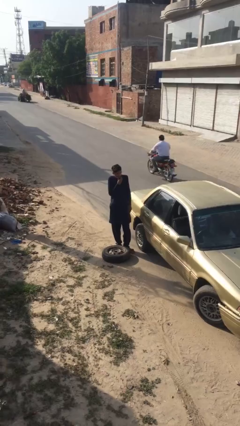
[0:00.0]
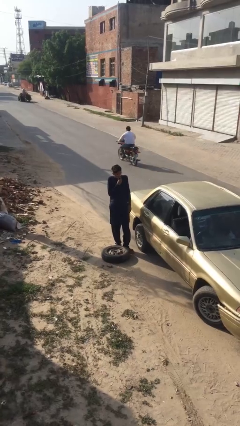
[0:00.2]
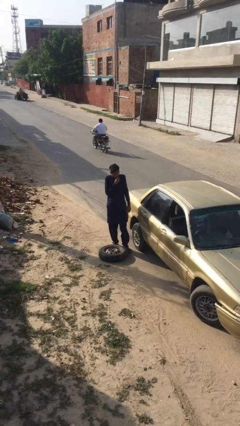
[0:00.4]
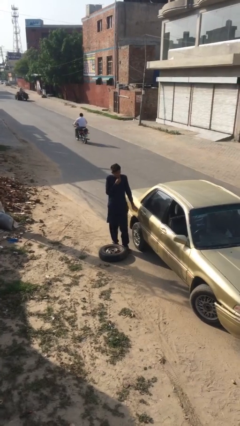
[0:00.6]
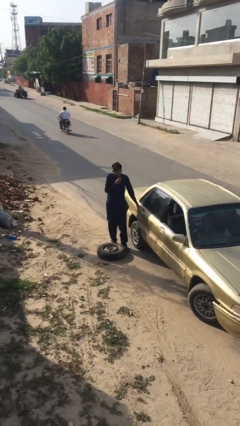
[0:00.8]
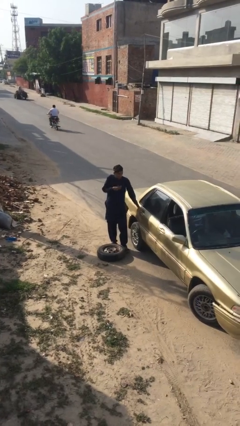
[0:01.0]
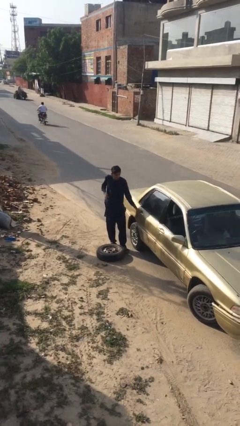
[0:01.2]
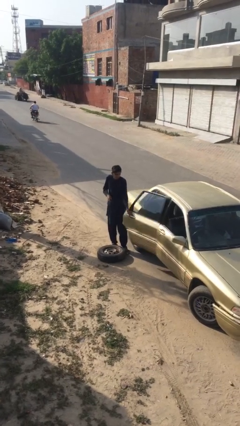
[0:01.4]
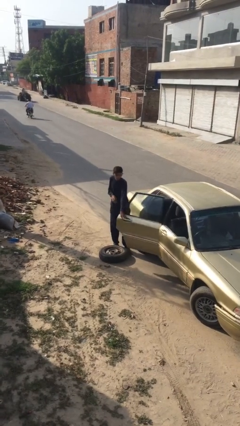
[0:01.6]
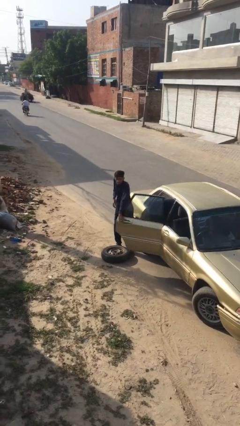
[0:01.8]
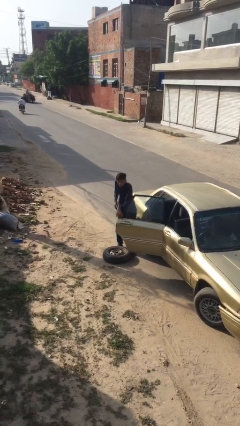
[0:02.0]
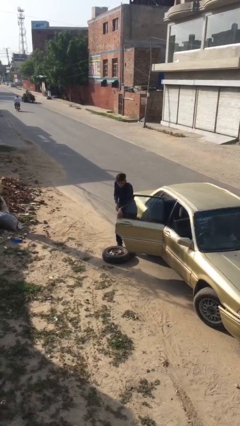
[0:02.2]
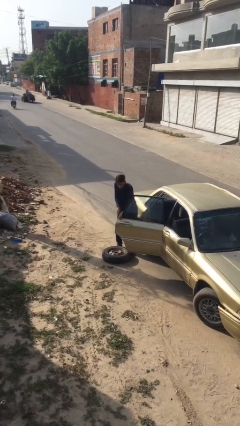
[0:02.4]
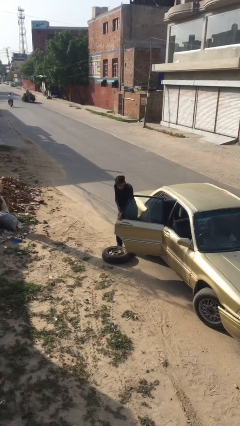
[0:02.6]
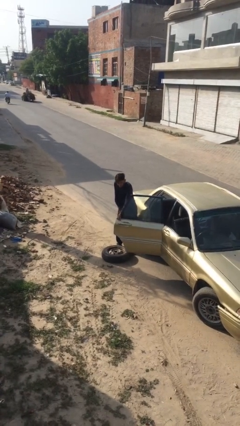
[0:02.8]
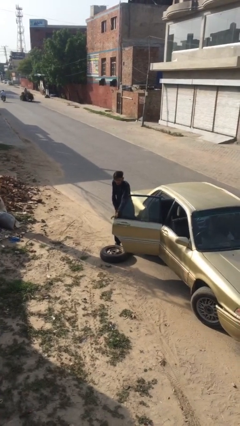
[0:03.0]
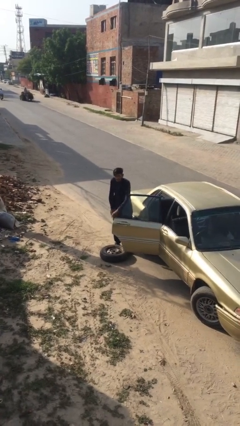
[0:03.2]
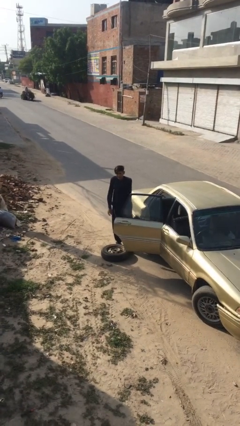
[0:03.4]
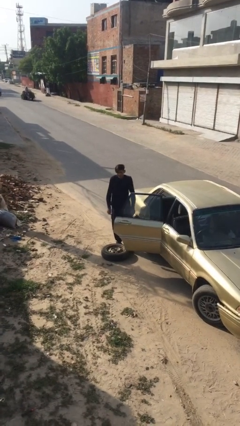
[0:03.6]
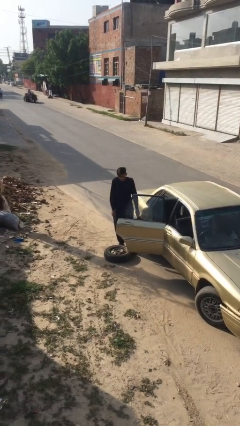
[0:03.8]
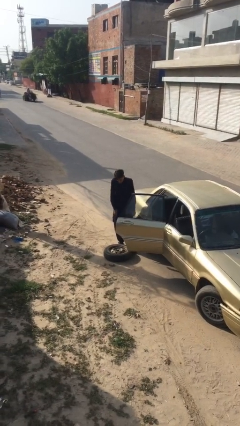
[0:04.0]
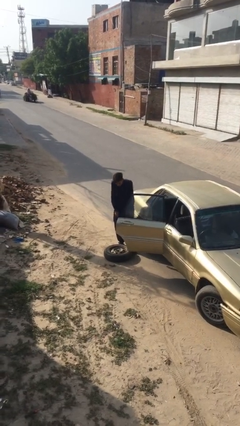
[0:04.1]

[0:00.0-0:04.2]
person opens car door

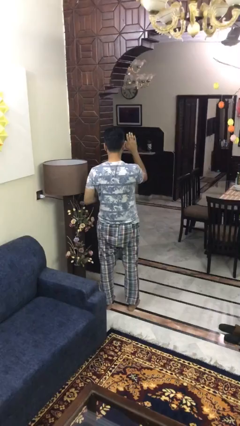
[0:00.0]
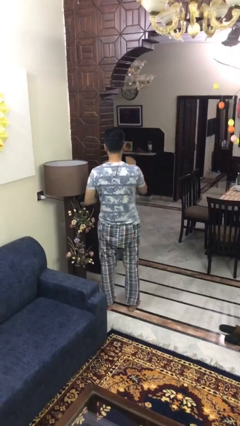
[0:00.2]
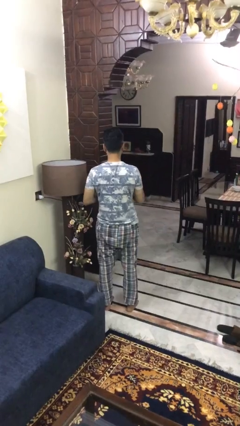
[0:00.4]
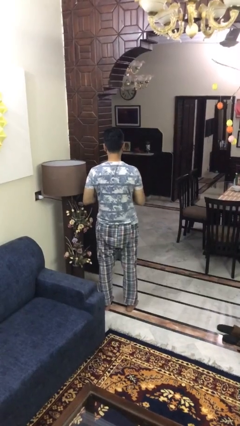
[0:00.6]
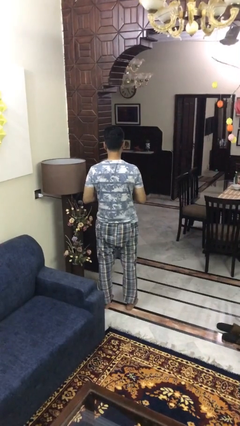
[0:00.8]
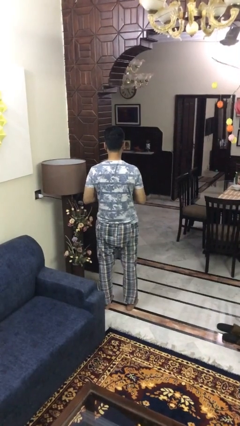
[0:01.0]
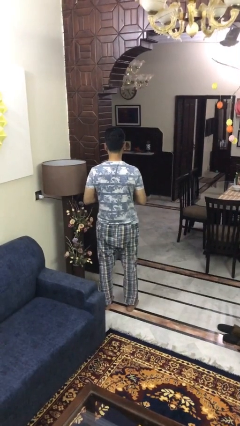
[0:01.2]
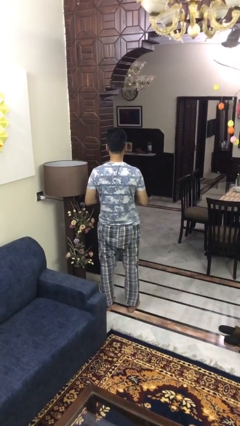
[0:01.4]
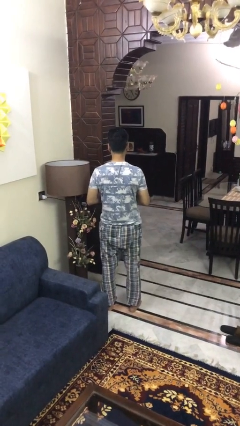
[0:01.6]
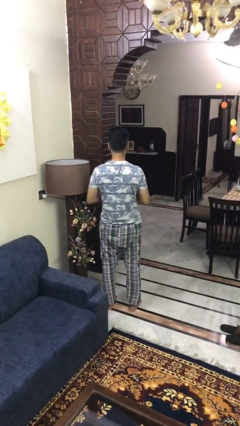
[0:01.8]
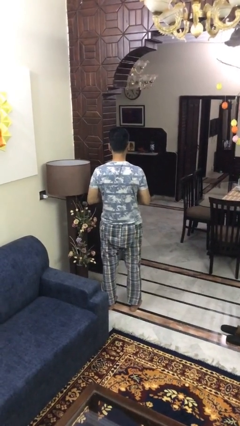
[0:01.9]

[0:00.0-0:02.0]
person gestures lower hand

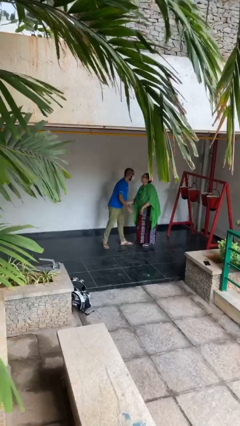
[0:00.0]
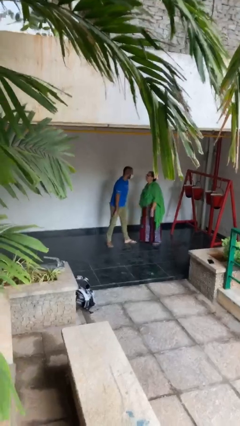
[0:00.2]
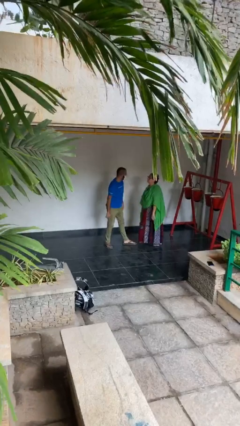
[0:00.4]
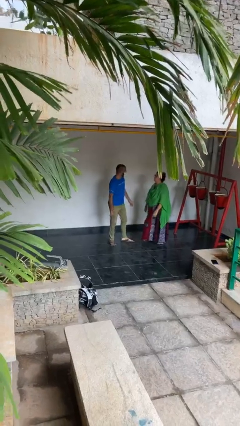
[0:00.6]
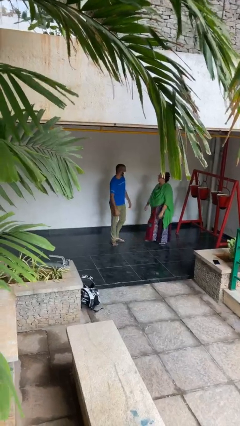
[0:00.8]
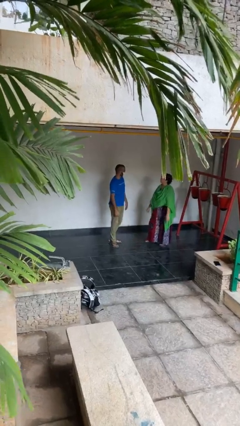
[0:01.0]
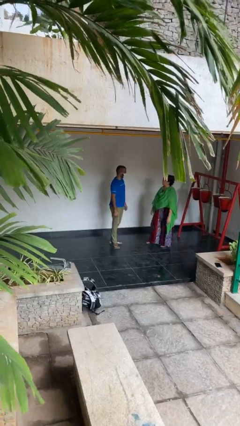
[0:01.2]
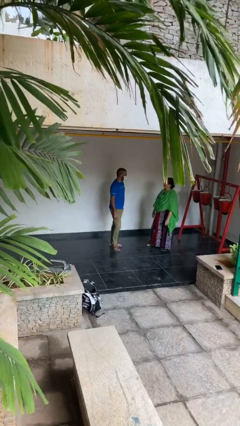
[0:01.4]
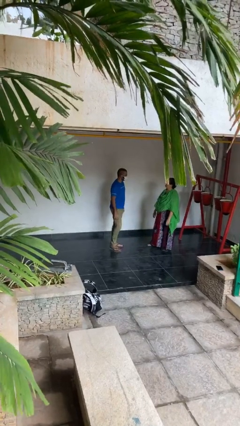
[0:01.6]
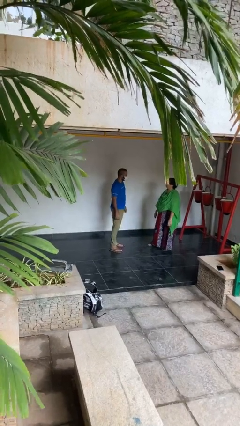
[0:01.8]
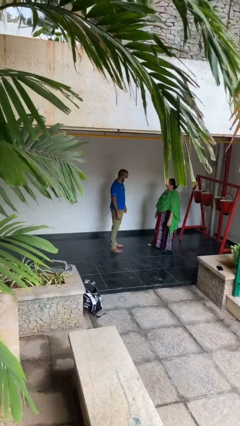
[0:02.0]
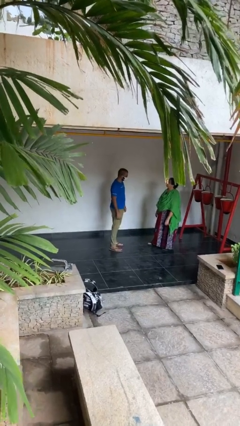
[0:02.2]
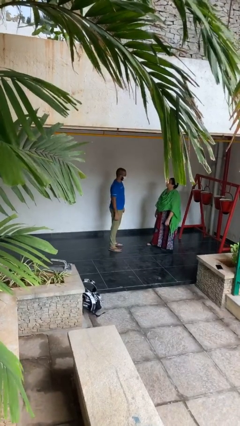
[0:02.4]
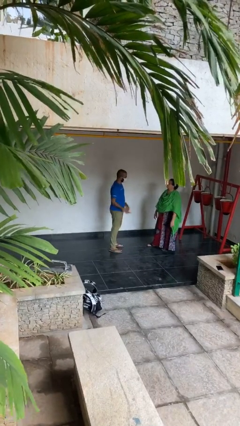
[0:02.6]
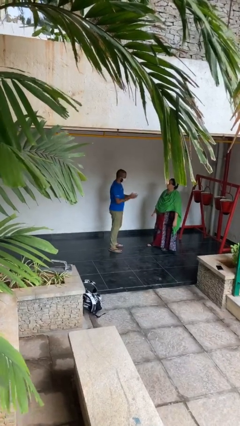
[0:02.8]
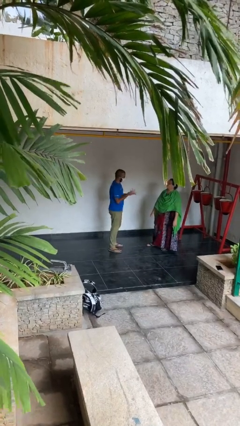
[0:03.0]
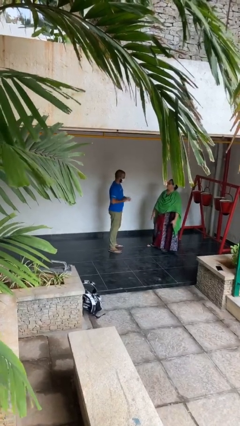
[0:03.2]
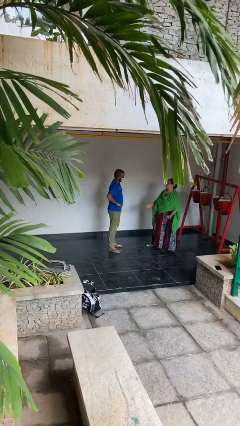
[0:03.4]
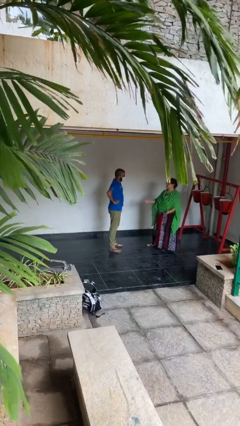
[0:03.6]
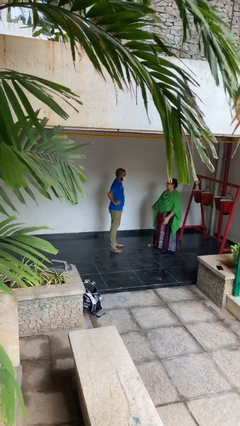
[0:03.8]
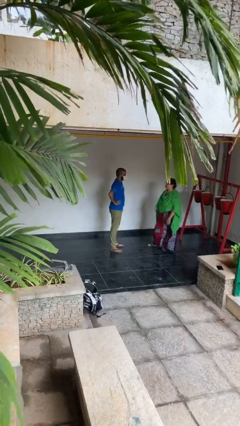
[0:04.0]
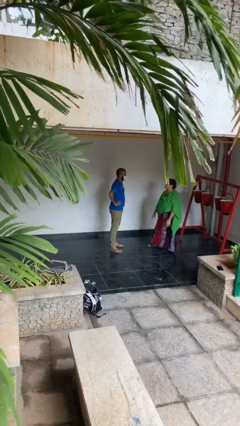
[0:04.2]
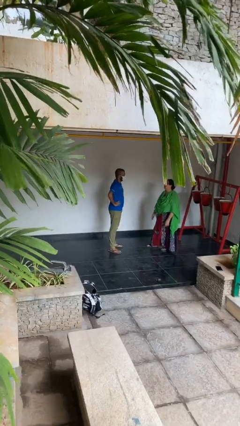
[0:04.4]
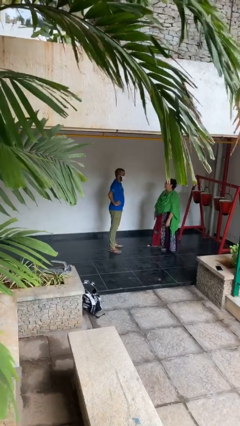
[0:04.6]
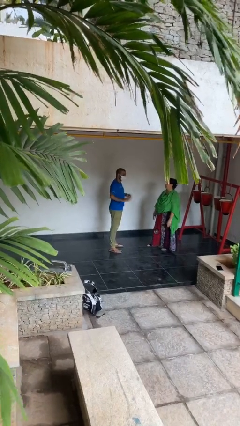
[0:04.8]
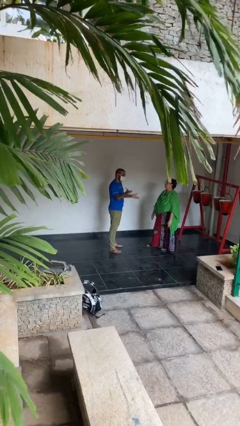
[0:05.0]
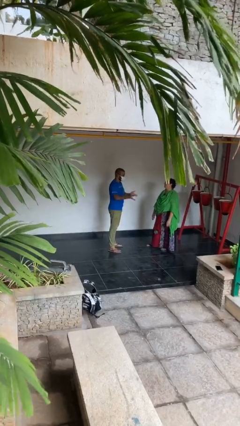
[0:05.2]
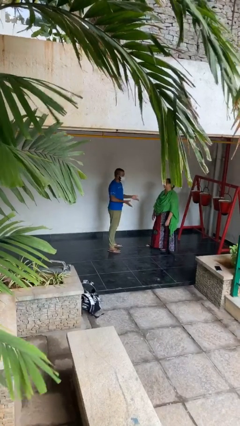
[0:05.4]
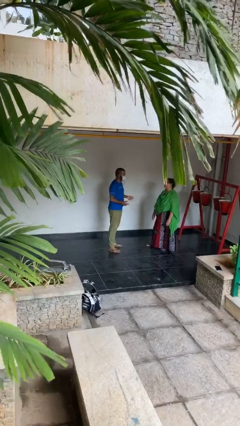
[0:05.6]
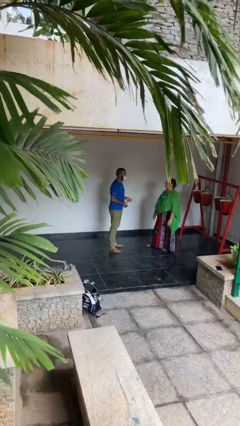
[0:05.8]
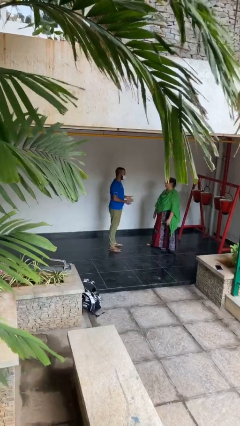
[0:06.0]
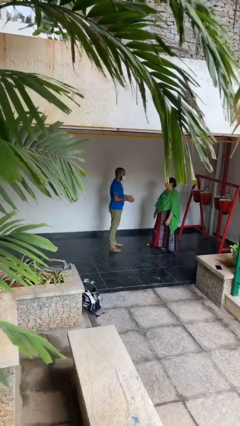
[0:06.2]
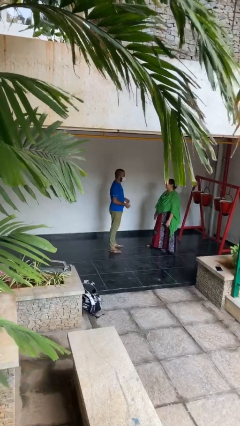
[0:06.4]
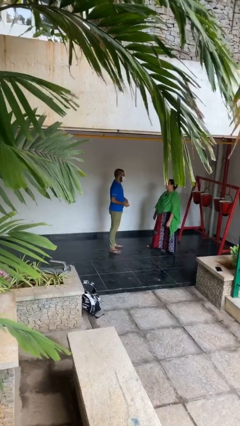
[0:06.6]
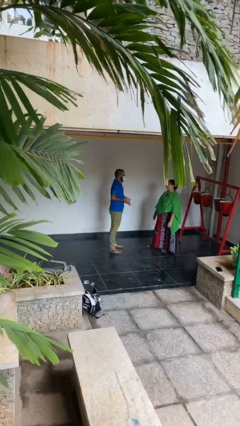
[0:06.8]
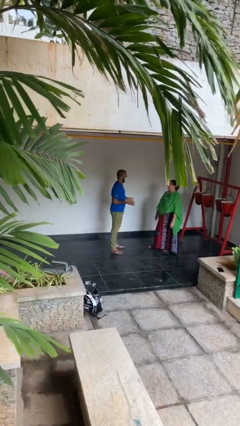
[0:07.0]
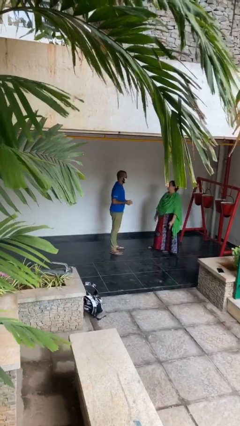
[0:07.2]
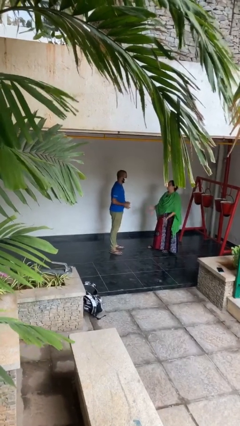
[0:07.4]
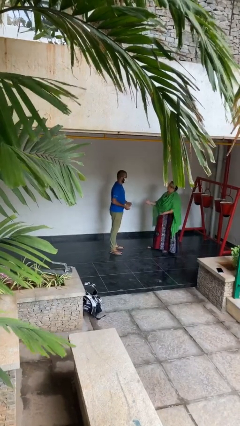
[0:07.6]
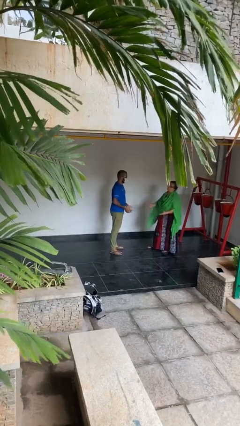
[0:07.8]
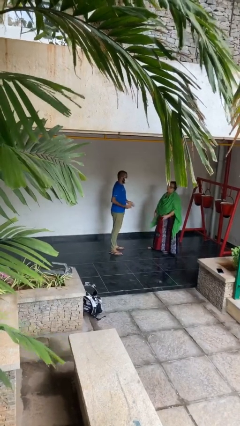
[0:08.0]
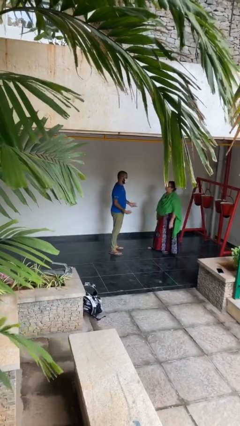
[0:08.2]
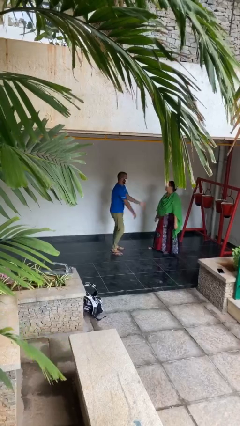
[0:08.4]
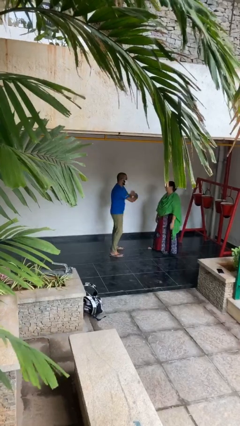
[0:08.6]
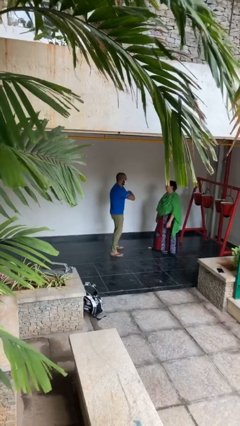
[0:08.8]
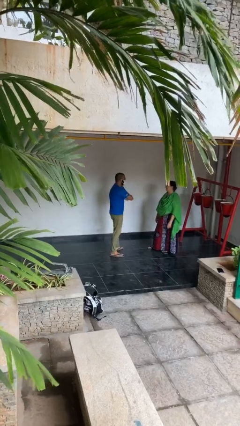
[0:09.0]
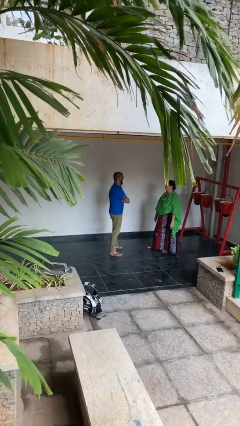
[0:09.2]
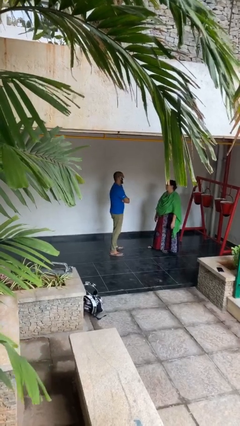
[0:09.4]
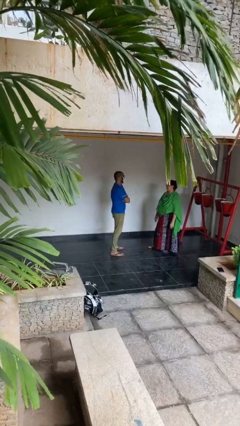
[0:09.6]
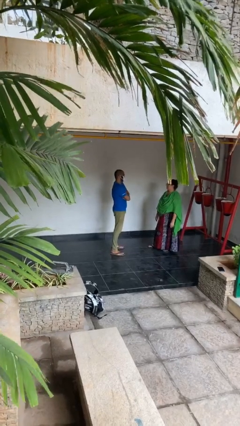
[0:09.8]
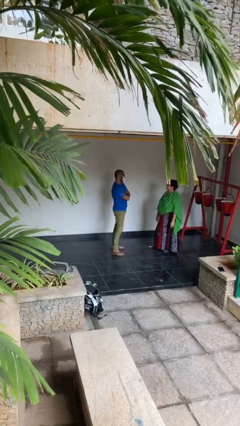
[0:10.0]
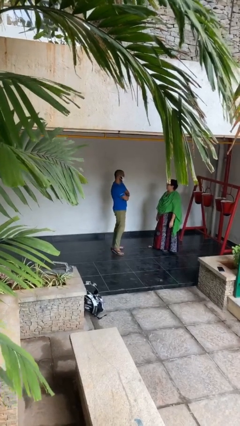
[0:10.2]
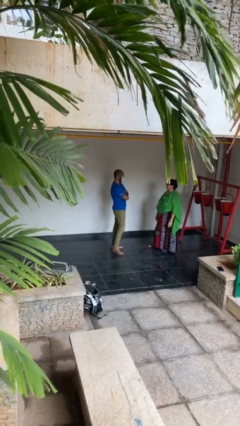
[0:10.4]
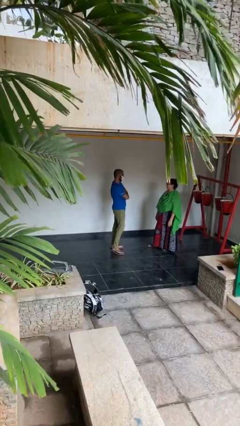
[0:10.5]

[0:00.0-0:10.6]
person talks to person

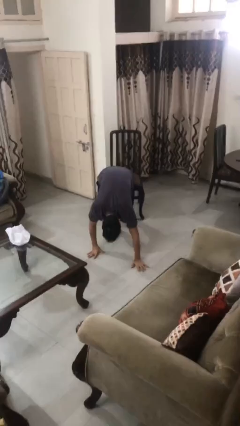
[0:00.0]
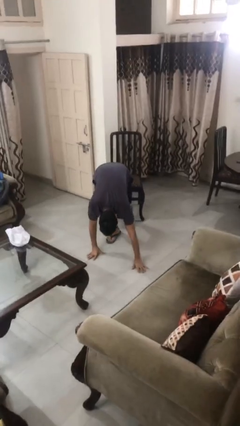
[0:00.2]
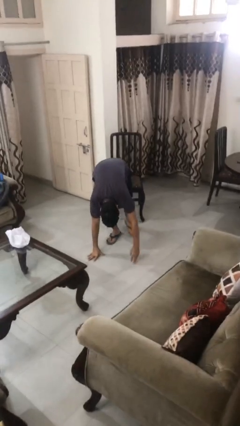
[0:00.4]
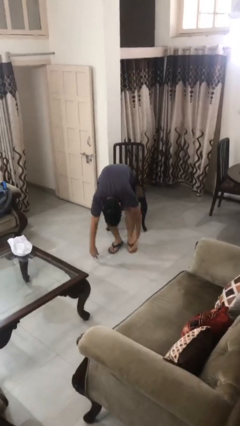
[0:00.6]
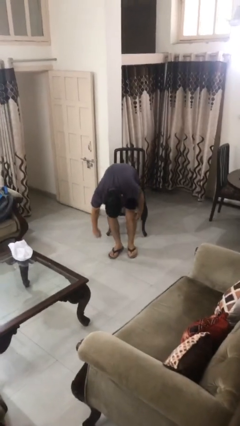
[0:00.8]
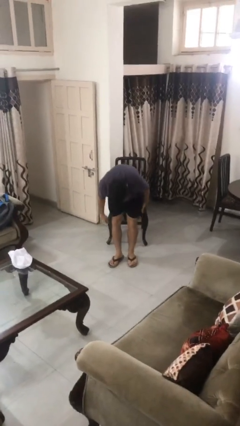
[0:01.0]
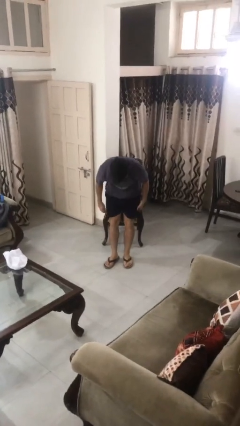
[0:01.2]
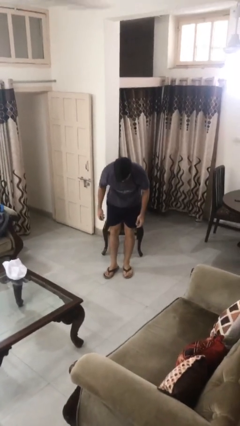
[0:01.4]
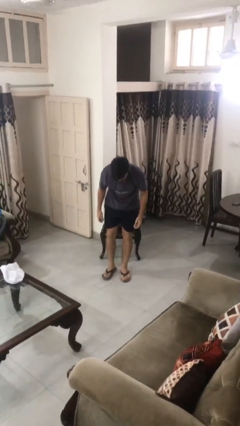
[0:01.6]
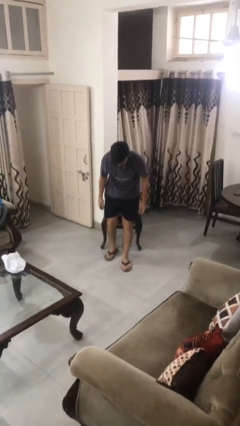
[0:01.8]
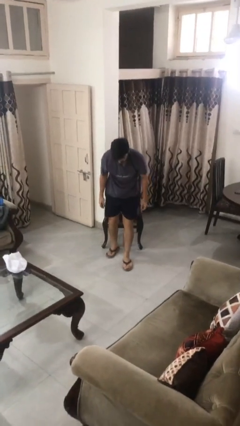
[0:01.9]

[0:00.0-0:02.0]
person stands up from floor
